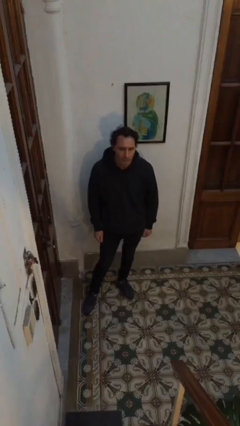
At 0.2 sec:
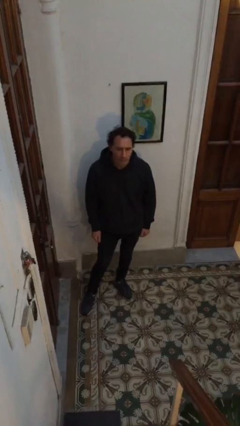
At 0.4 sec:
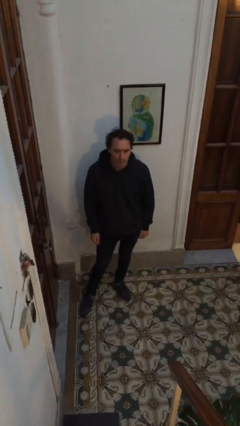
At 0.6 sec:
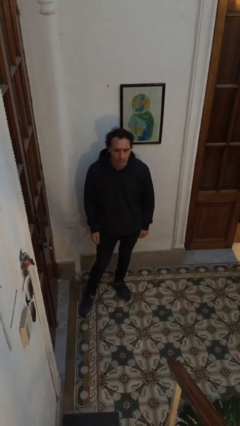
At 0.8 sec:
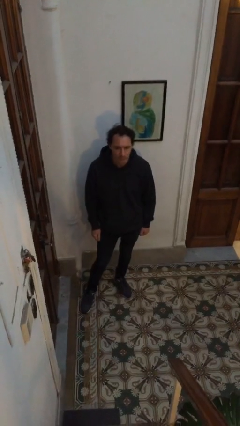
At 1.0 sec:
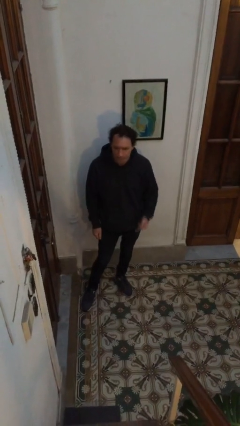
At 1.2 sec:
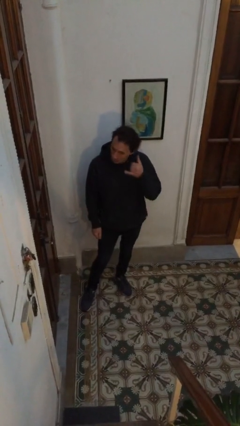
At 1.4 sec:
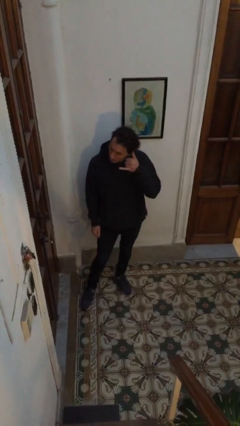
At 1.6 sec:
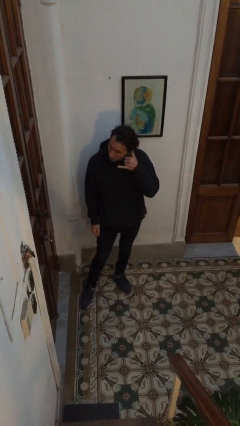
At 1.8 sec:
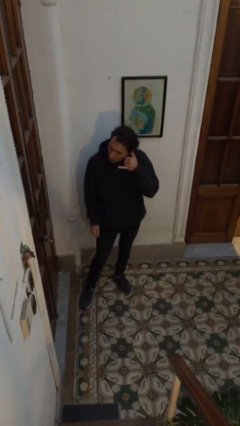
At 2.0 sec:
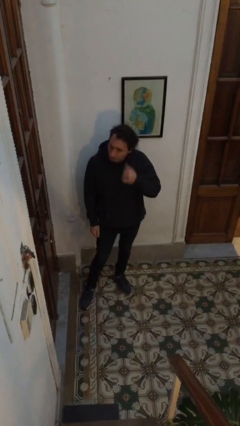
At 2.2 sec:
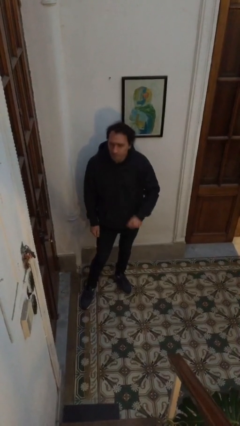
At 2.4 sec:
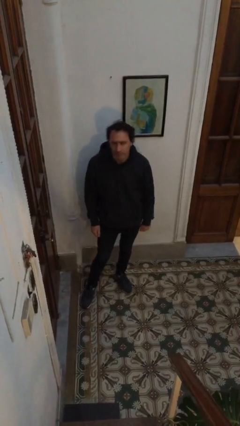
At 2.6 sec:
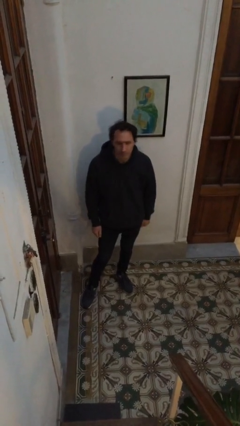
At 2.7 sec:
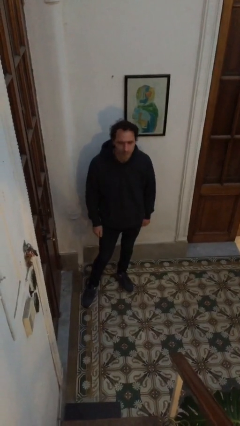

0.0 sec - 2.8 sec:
person gestures call me

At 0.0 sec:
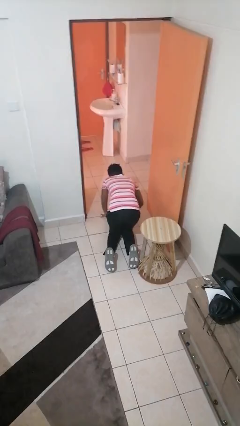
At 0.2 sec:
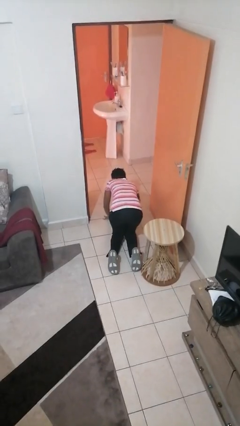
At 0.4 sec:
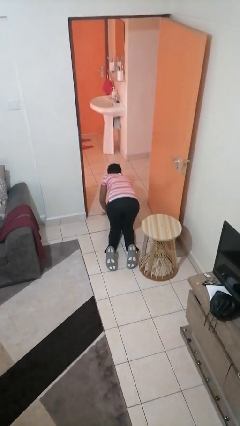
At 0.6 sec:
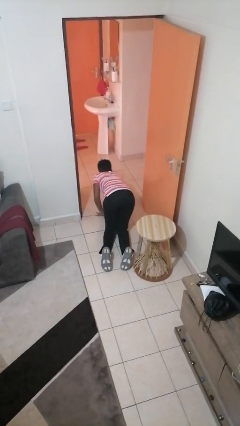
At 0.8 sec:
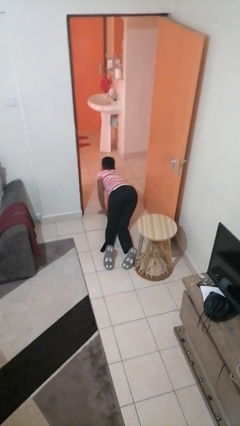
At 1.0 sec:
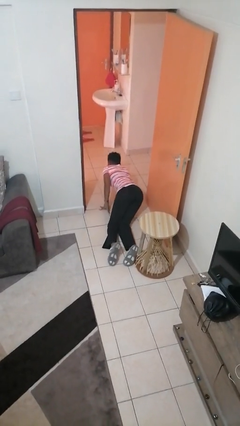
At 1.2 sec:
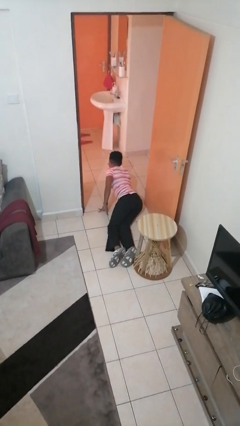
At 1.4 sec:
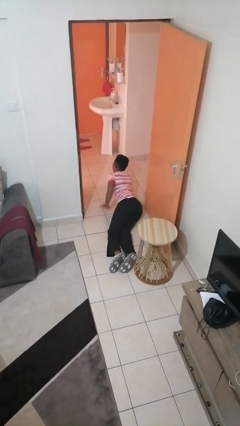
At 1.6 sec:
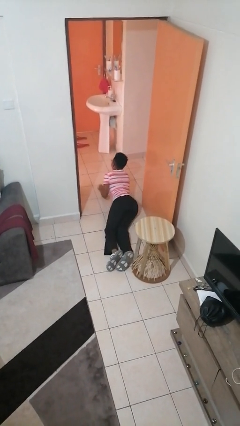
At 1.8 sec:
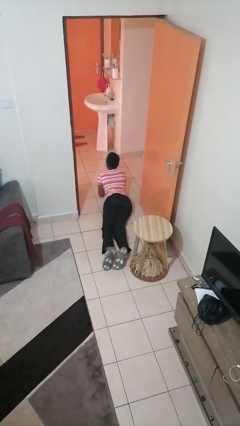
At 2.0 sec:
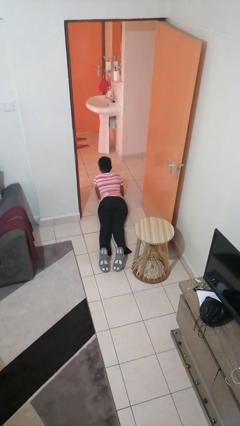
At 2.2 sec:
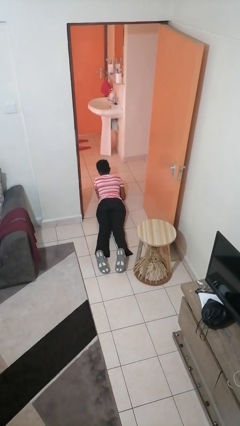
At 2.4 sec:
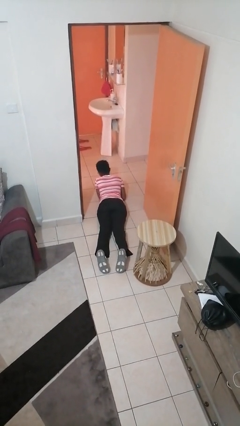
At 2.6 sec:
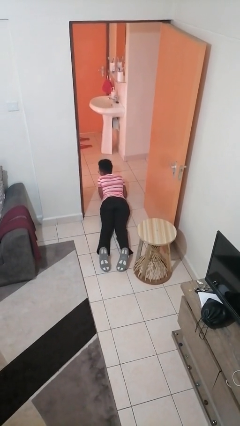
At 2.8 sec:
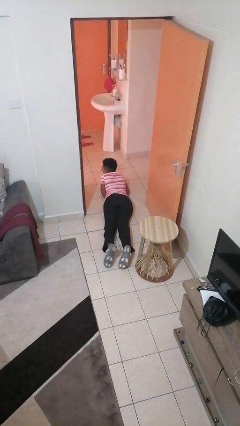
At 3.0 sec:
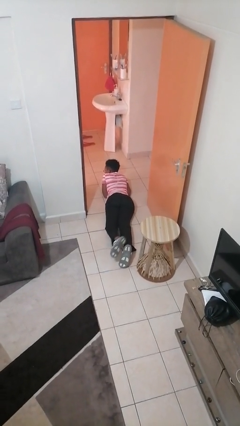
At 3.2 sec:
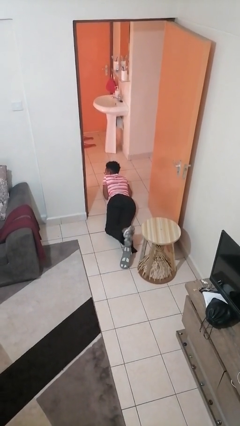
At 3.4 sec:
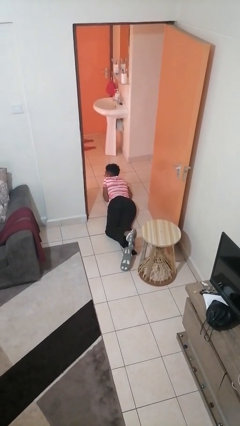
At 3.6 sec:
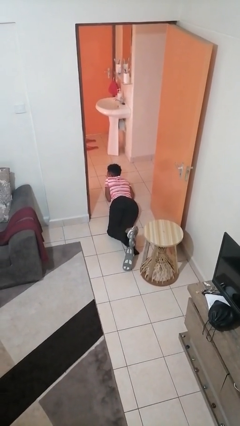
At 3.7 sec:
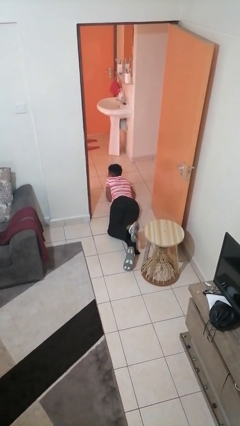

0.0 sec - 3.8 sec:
person lies down on floor

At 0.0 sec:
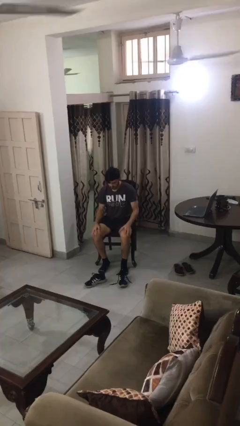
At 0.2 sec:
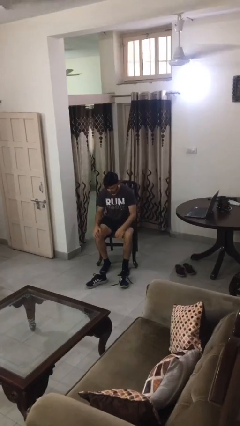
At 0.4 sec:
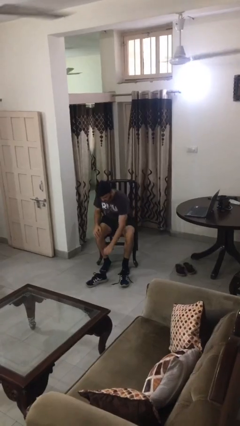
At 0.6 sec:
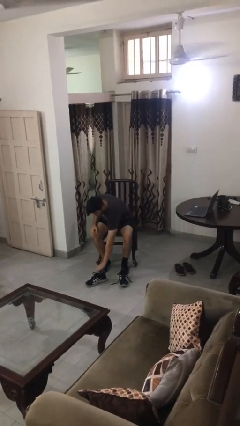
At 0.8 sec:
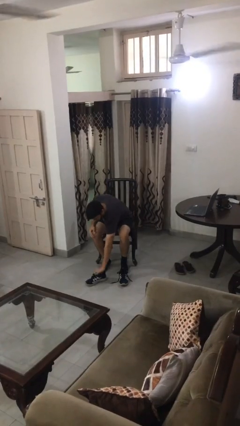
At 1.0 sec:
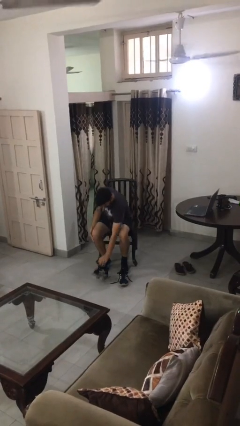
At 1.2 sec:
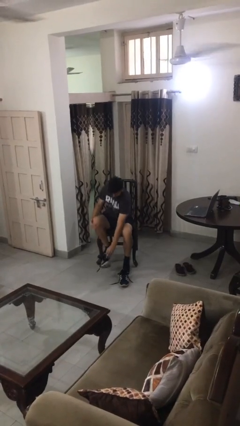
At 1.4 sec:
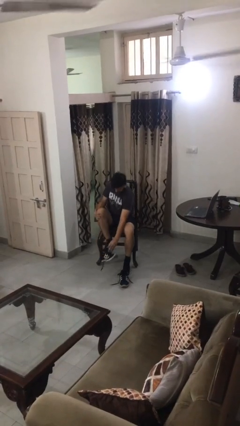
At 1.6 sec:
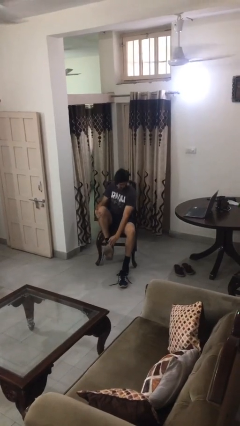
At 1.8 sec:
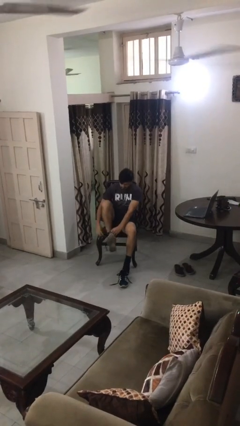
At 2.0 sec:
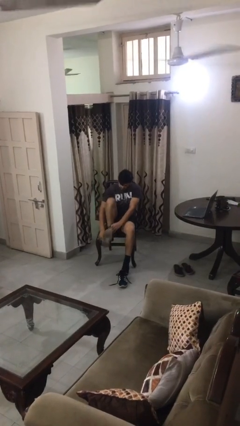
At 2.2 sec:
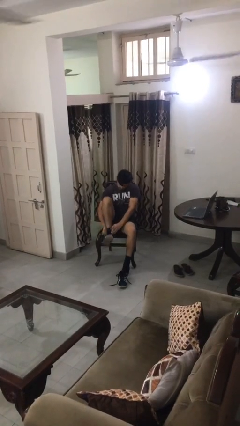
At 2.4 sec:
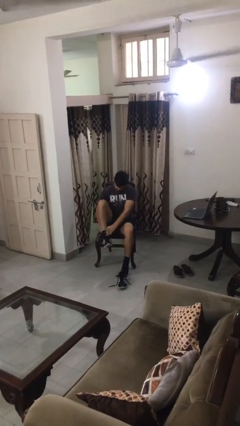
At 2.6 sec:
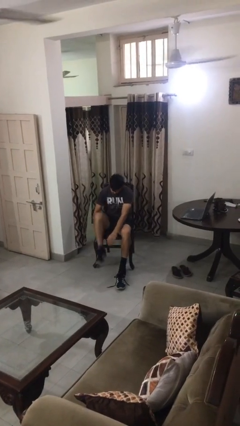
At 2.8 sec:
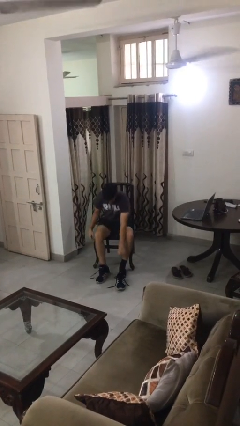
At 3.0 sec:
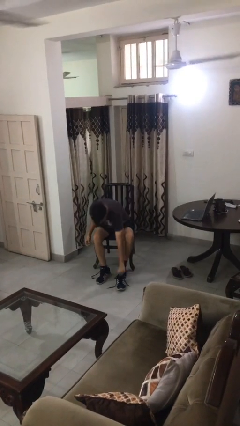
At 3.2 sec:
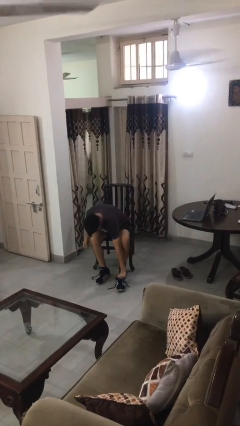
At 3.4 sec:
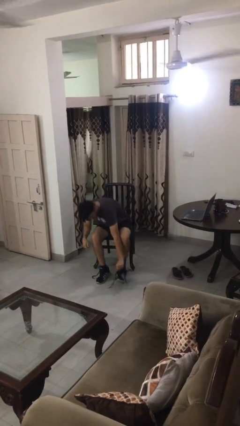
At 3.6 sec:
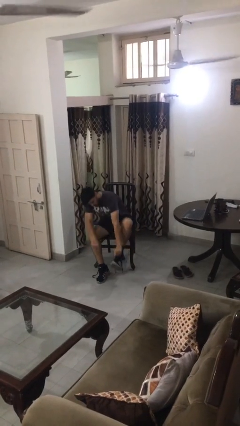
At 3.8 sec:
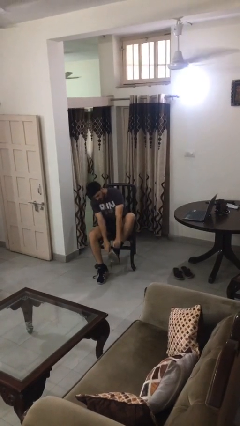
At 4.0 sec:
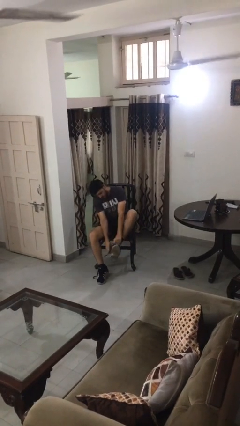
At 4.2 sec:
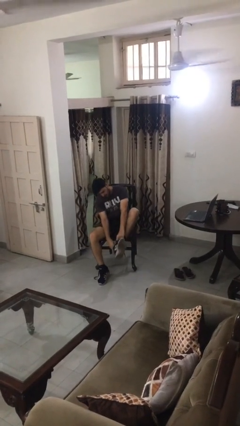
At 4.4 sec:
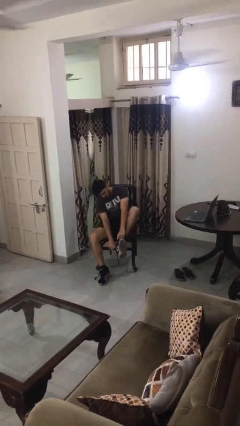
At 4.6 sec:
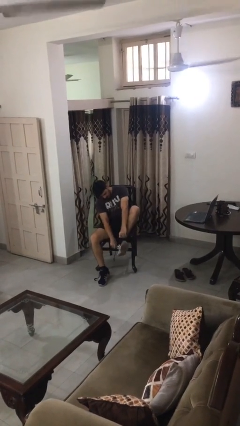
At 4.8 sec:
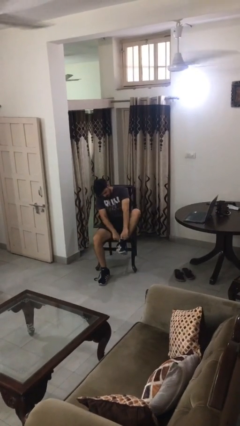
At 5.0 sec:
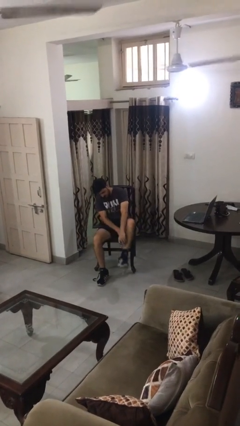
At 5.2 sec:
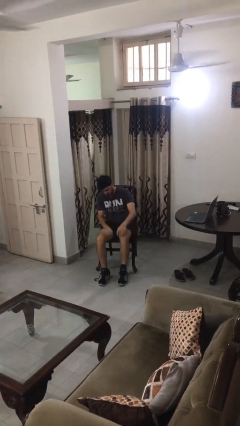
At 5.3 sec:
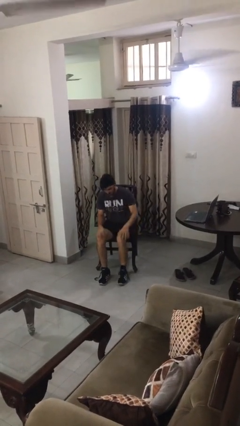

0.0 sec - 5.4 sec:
person puts on shoes

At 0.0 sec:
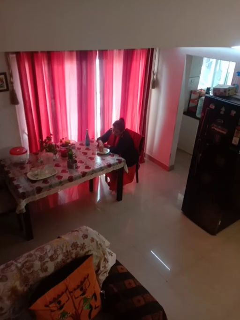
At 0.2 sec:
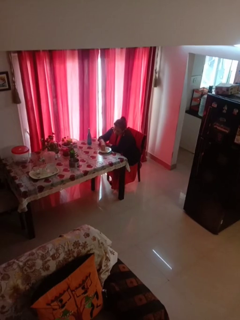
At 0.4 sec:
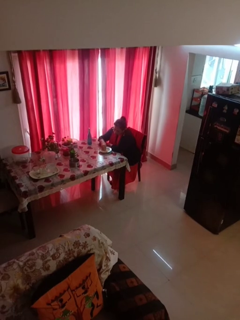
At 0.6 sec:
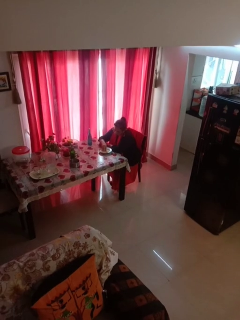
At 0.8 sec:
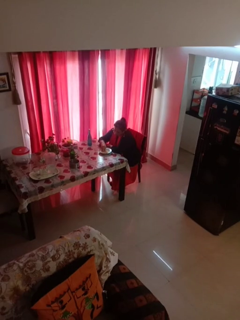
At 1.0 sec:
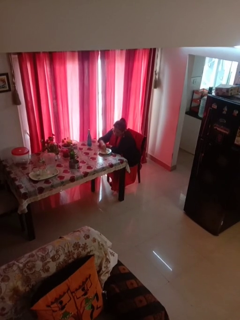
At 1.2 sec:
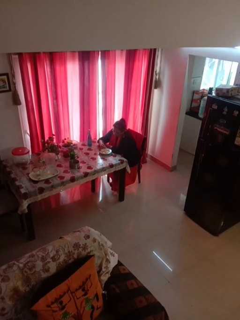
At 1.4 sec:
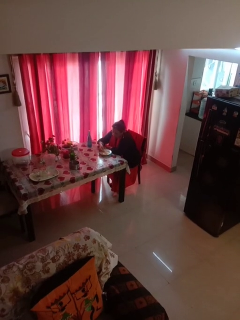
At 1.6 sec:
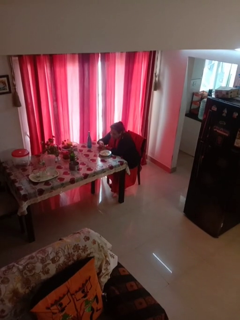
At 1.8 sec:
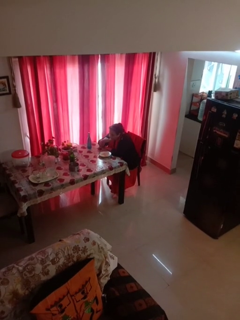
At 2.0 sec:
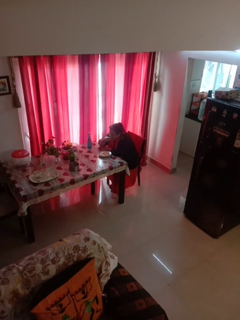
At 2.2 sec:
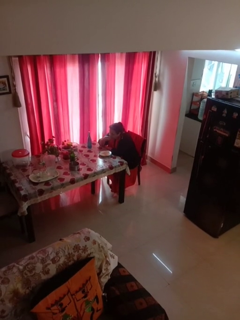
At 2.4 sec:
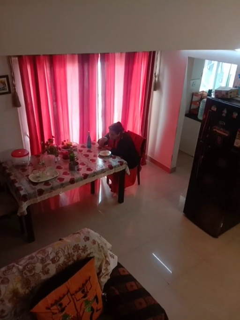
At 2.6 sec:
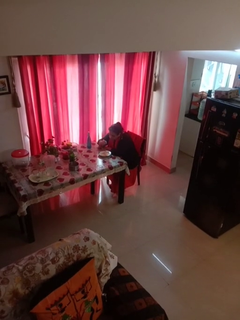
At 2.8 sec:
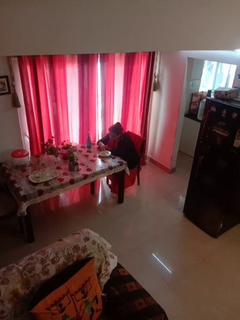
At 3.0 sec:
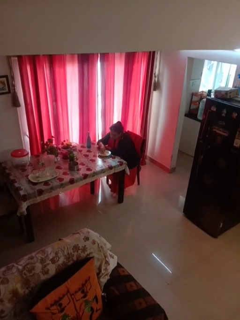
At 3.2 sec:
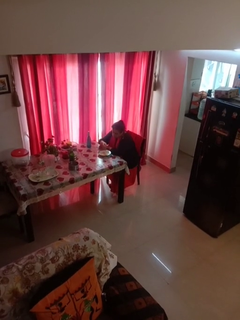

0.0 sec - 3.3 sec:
person eats with hands

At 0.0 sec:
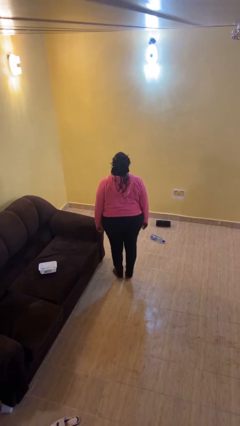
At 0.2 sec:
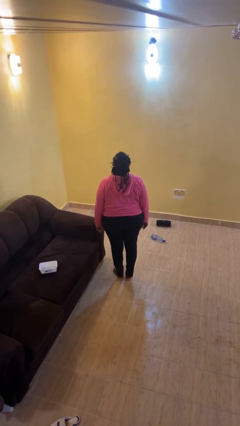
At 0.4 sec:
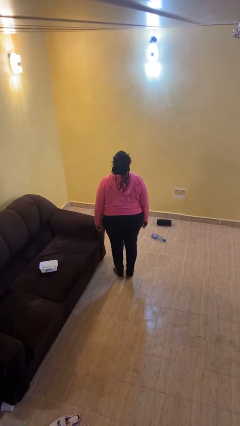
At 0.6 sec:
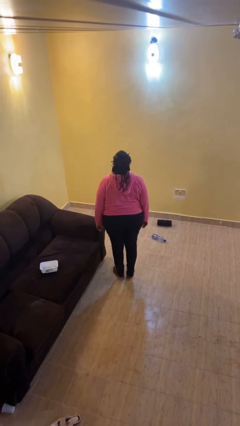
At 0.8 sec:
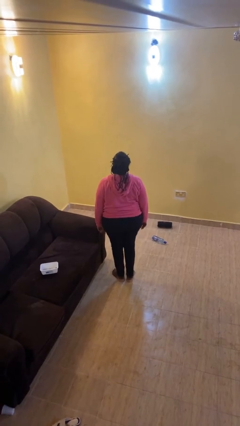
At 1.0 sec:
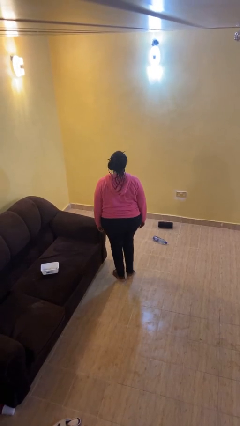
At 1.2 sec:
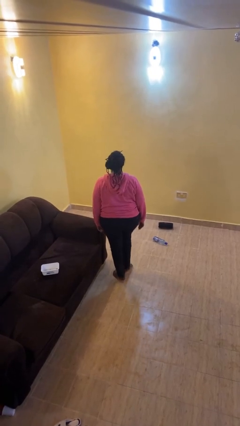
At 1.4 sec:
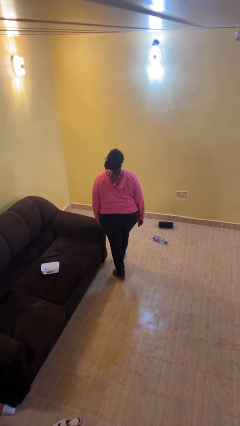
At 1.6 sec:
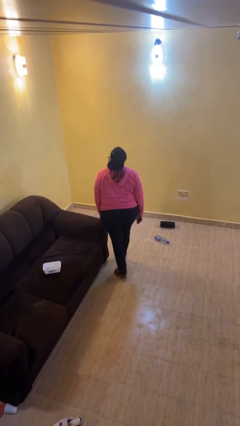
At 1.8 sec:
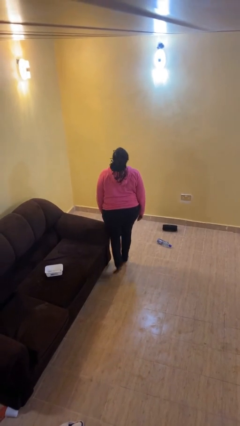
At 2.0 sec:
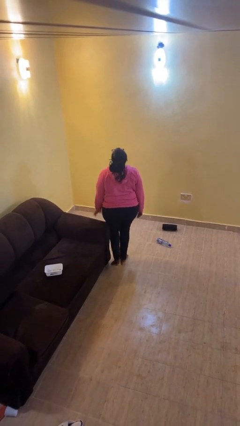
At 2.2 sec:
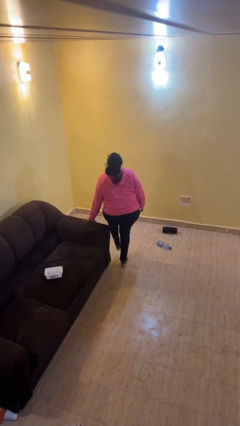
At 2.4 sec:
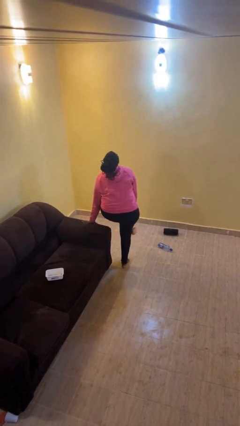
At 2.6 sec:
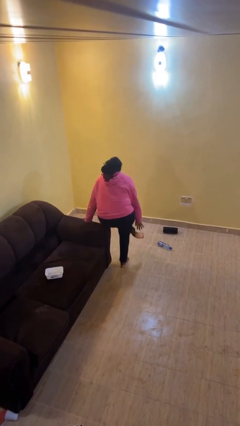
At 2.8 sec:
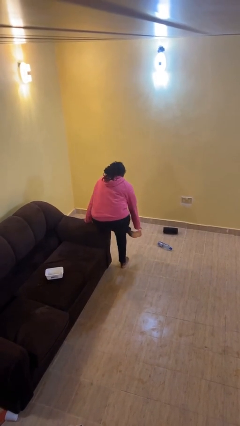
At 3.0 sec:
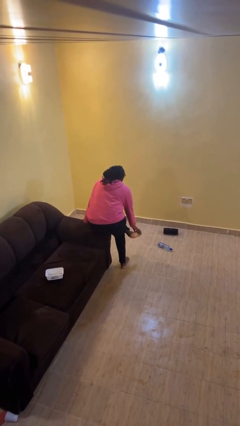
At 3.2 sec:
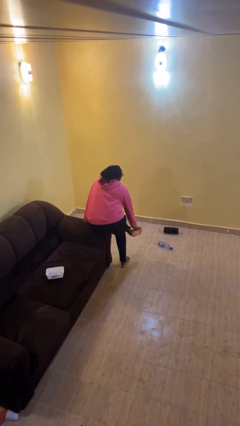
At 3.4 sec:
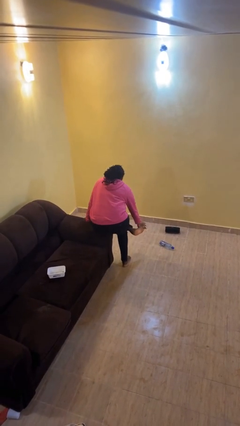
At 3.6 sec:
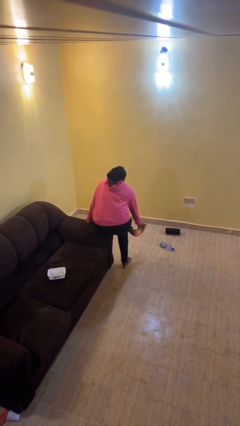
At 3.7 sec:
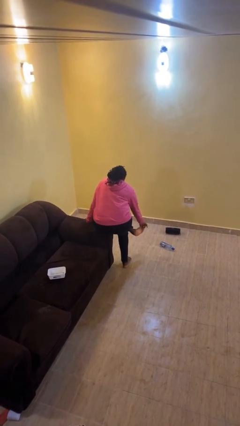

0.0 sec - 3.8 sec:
person stubs toe
